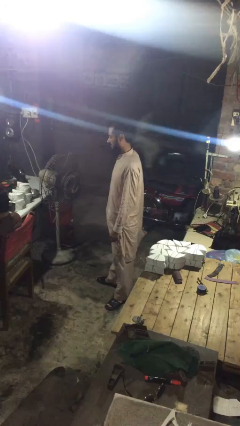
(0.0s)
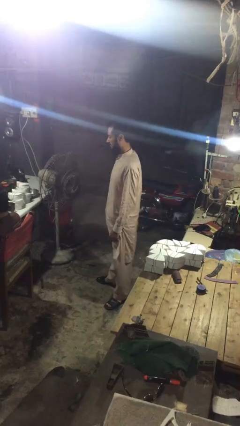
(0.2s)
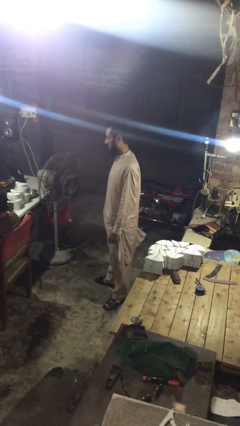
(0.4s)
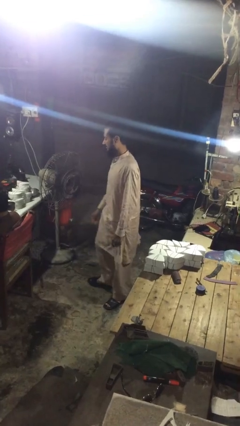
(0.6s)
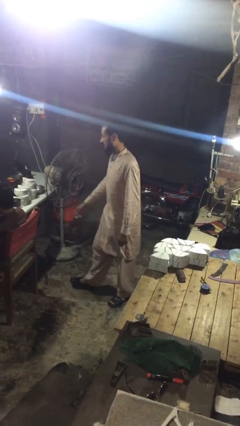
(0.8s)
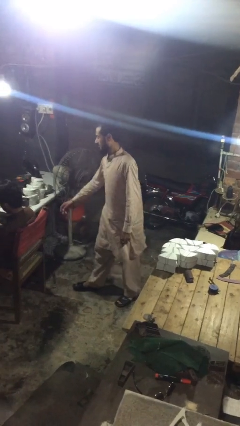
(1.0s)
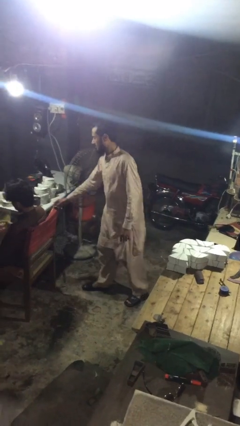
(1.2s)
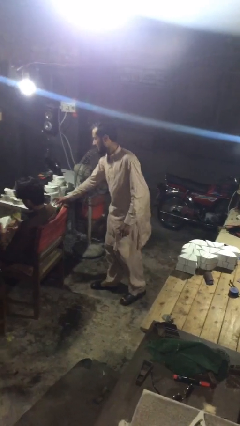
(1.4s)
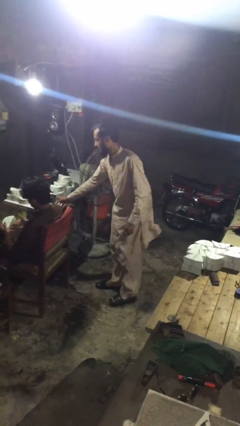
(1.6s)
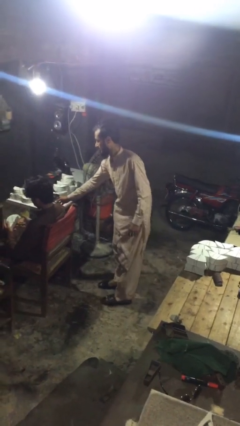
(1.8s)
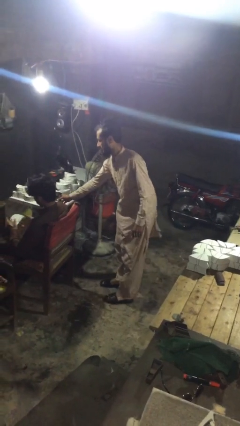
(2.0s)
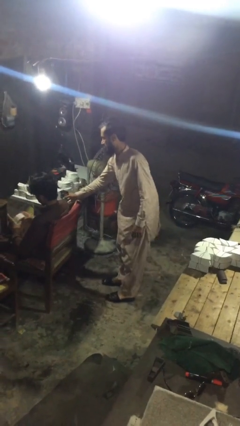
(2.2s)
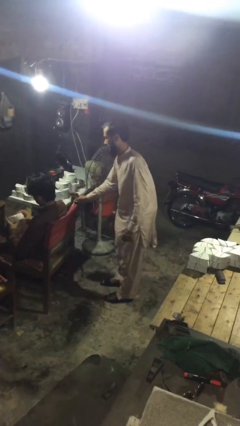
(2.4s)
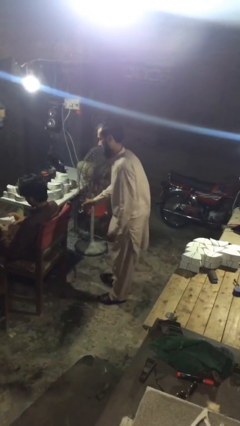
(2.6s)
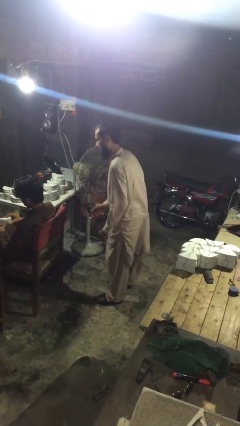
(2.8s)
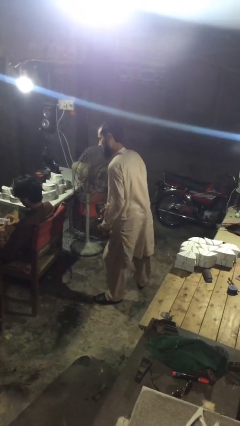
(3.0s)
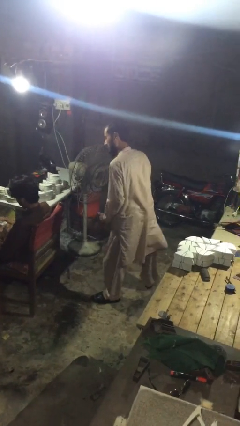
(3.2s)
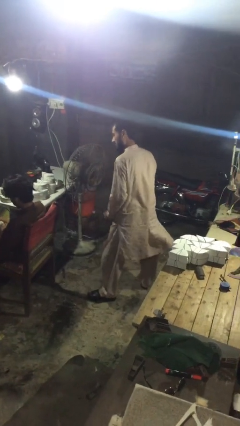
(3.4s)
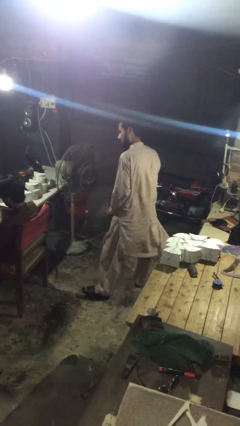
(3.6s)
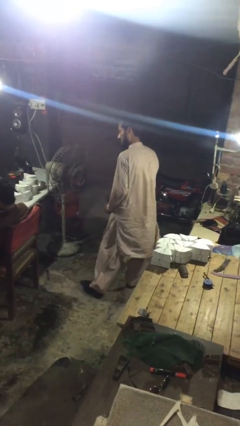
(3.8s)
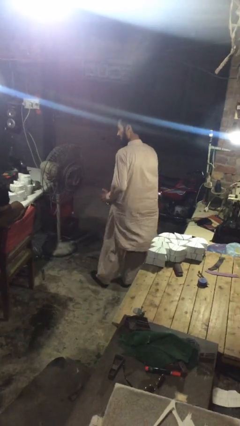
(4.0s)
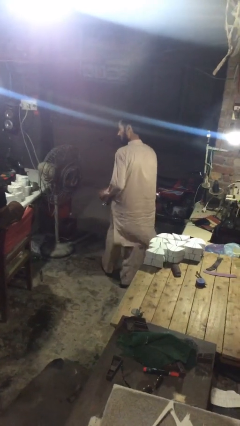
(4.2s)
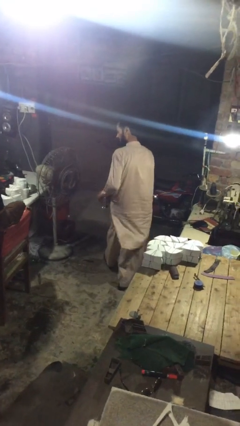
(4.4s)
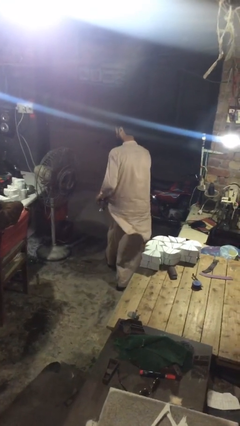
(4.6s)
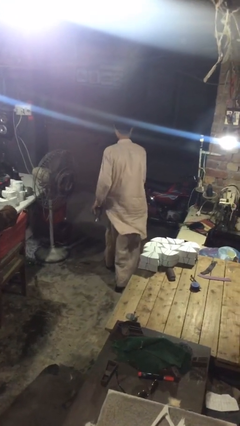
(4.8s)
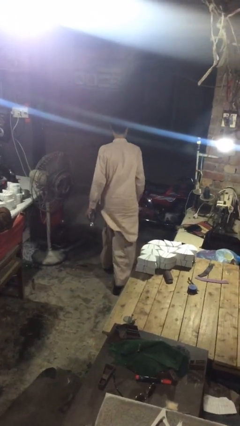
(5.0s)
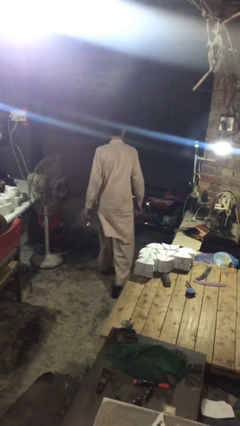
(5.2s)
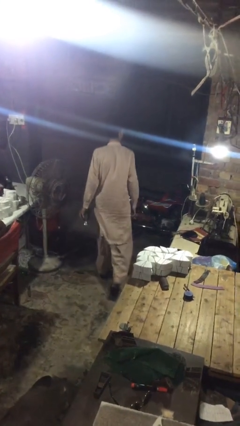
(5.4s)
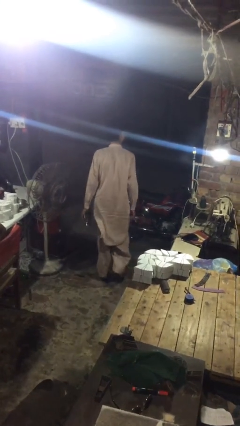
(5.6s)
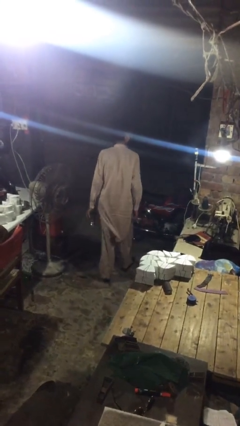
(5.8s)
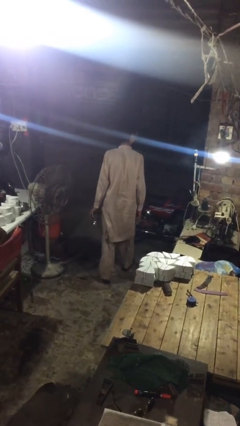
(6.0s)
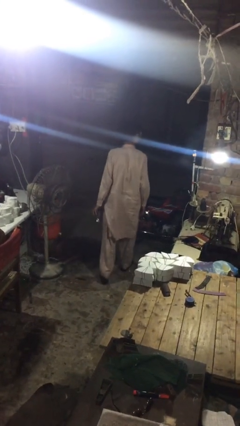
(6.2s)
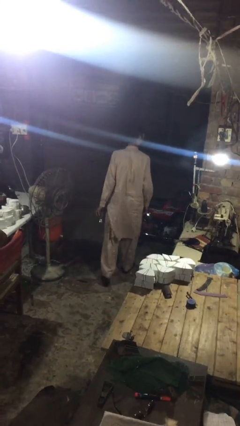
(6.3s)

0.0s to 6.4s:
person steals object from person

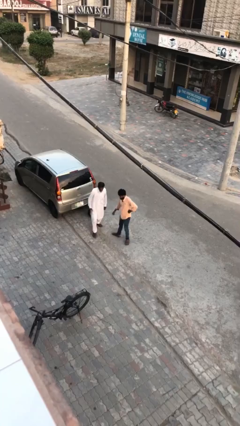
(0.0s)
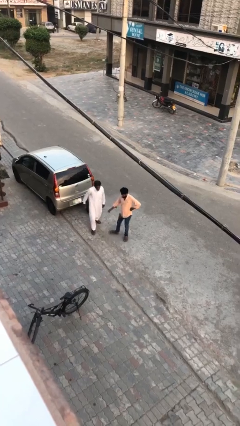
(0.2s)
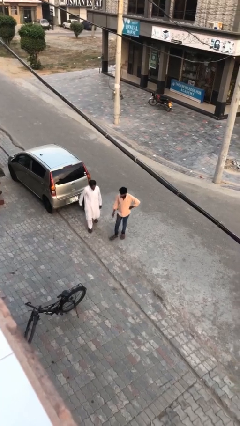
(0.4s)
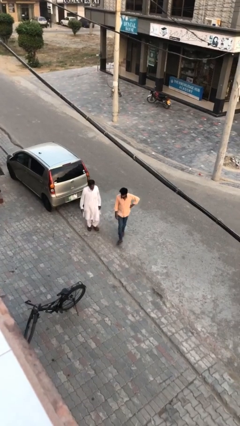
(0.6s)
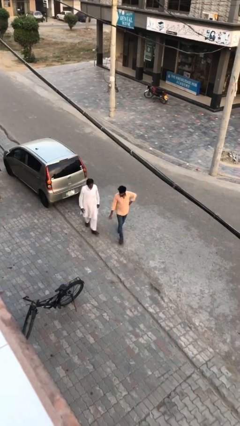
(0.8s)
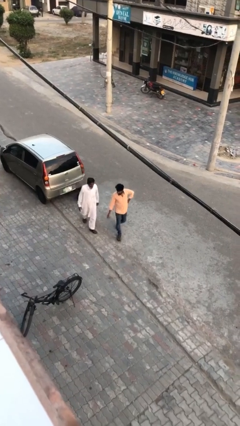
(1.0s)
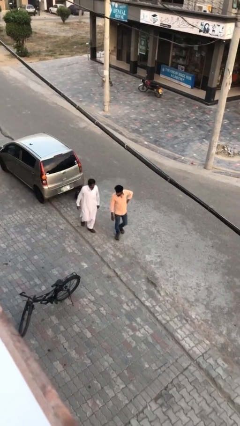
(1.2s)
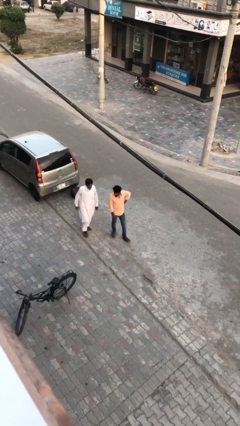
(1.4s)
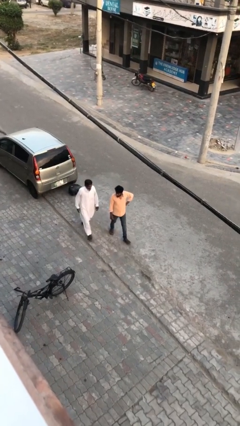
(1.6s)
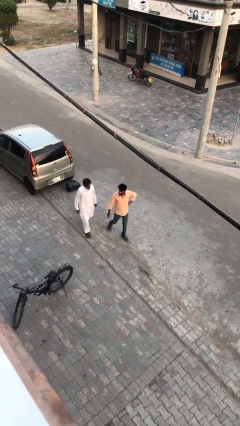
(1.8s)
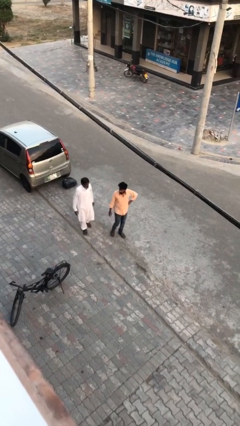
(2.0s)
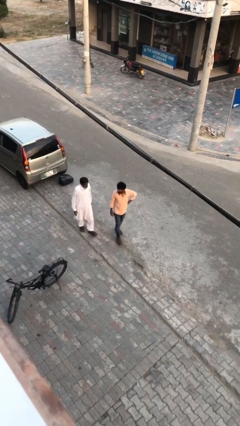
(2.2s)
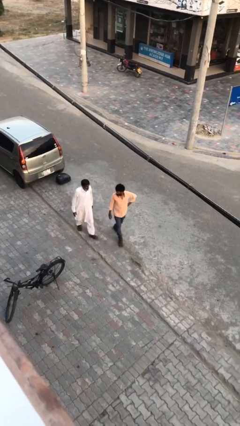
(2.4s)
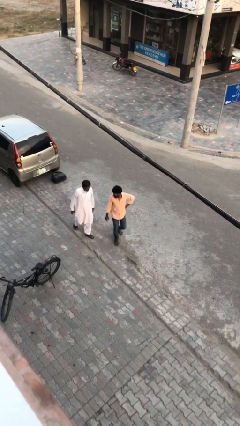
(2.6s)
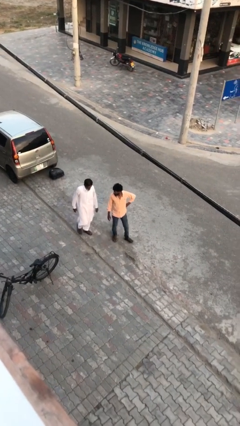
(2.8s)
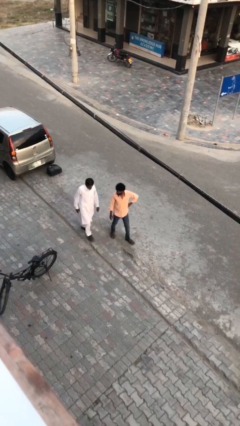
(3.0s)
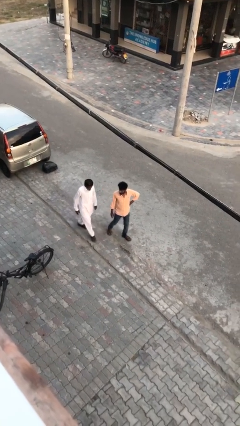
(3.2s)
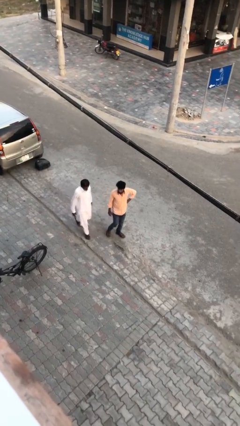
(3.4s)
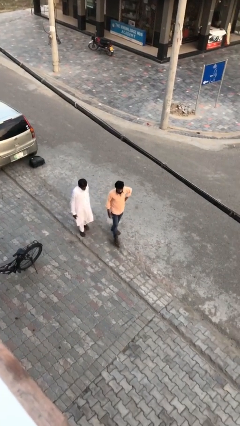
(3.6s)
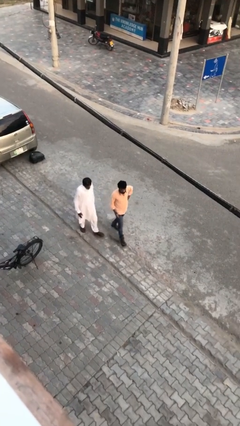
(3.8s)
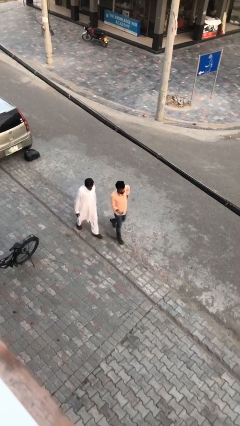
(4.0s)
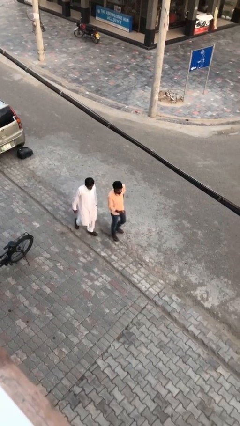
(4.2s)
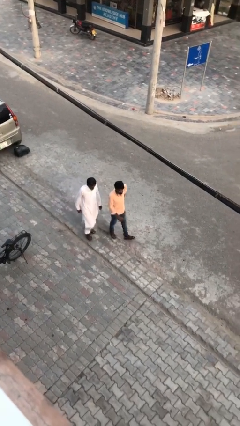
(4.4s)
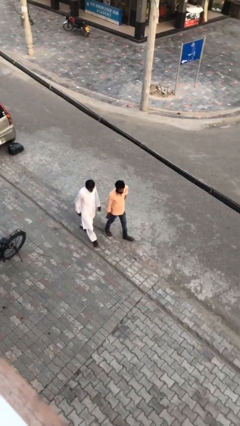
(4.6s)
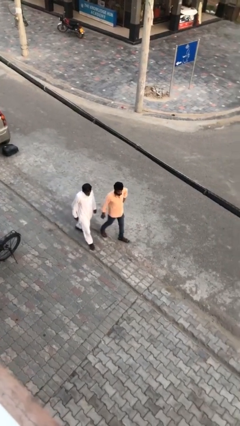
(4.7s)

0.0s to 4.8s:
person talks to person

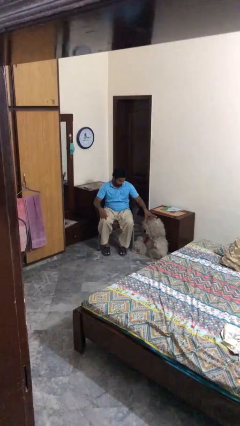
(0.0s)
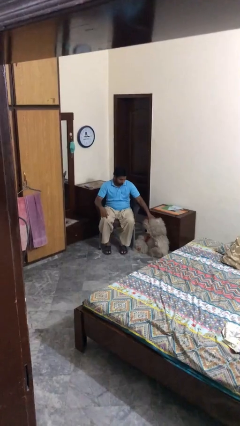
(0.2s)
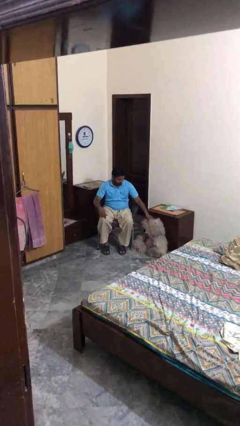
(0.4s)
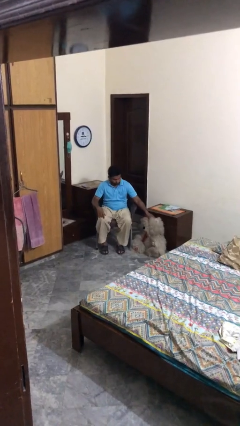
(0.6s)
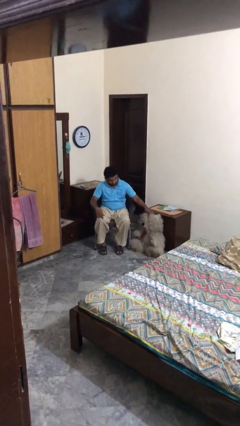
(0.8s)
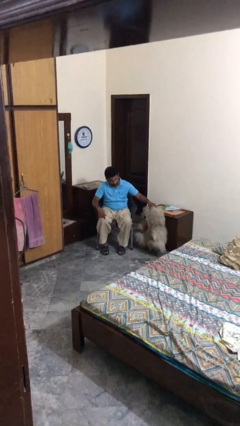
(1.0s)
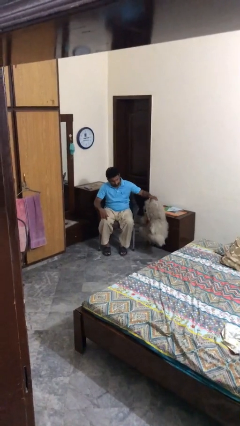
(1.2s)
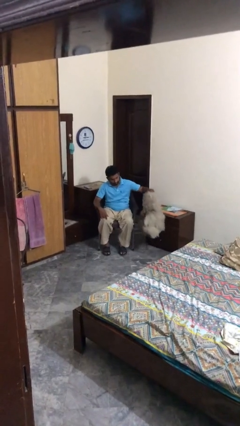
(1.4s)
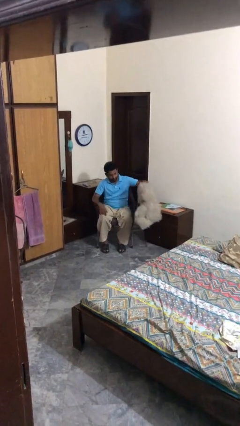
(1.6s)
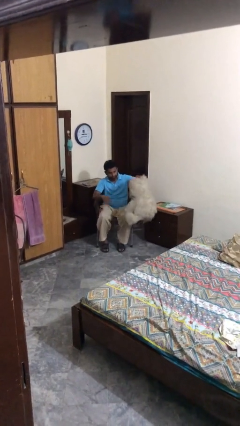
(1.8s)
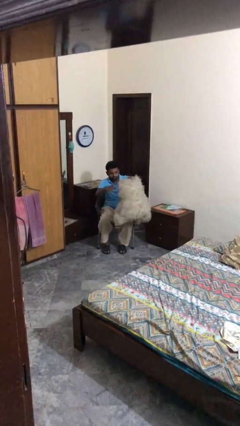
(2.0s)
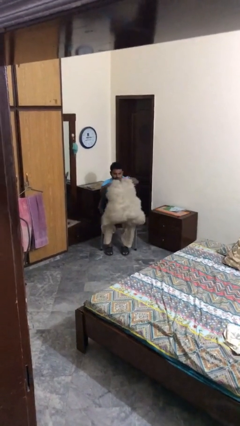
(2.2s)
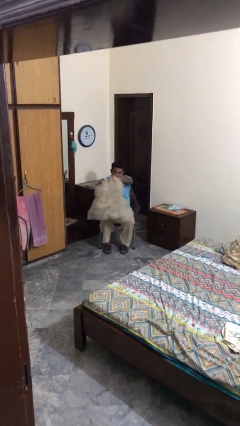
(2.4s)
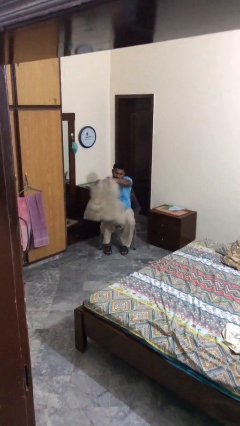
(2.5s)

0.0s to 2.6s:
person picks up object from floor

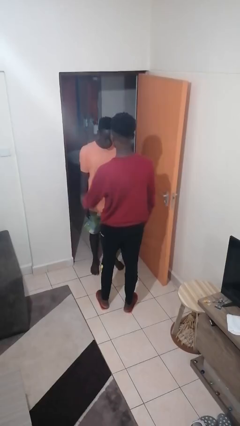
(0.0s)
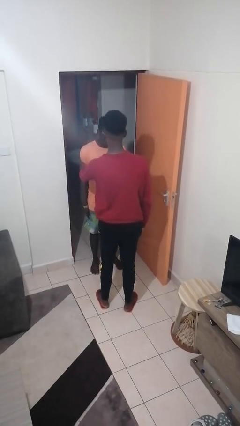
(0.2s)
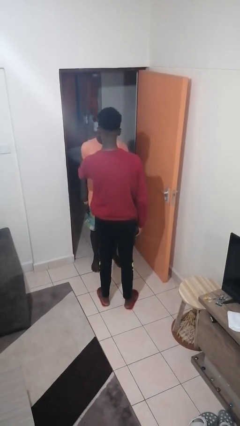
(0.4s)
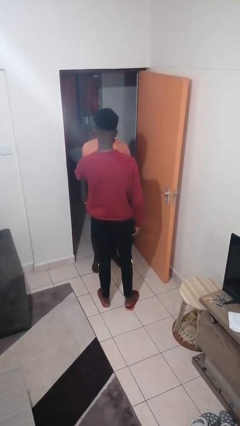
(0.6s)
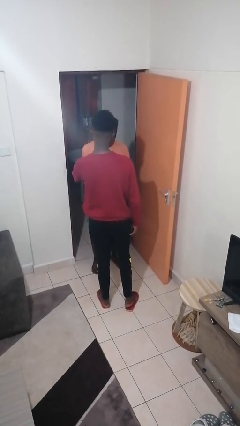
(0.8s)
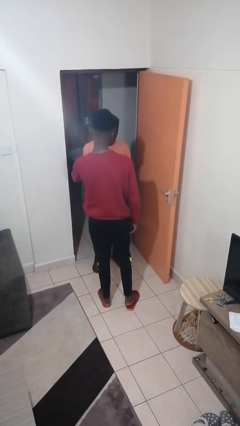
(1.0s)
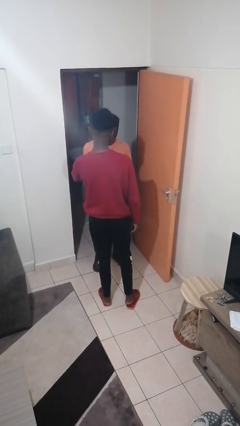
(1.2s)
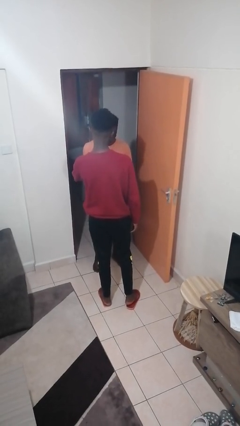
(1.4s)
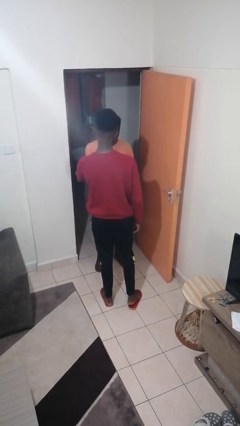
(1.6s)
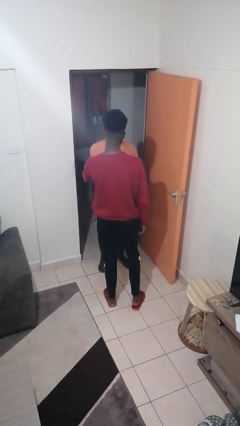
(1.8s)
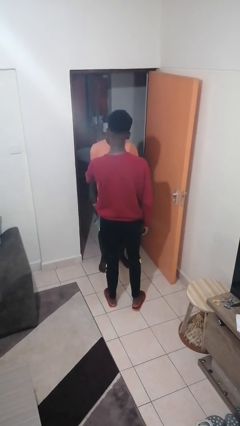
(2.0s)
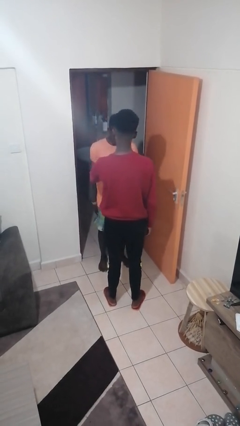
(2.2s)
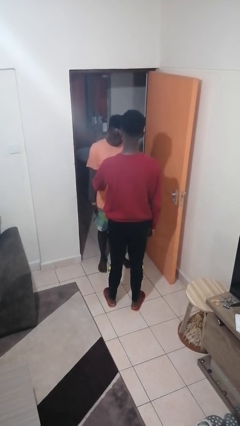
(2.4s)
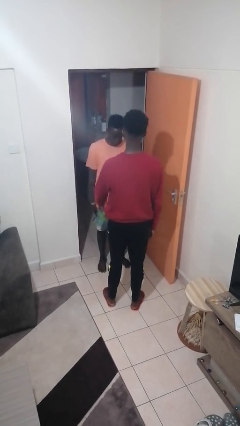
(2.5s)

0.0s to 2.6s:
person grabs person by bicep

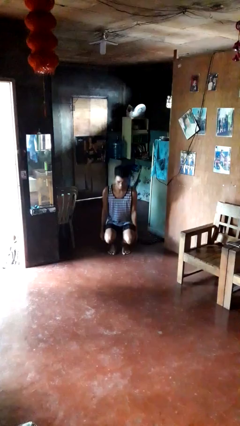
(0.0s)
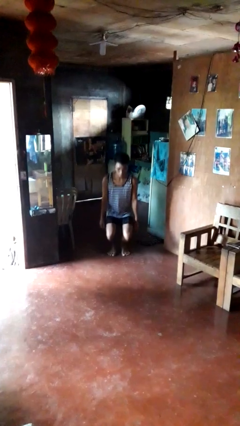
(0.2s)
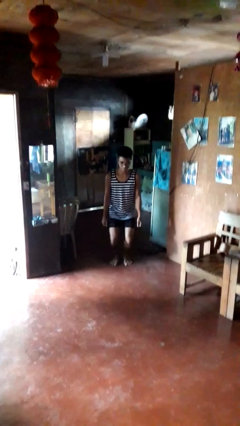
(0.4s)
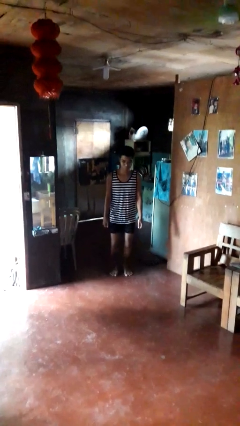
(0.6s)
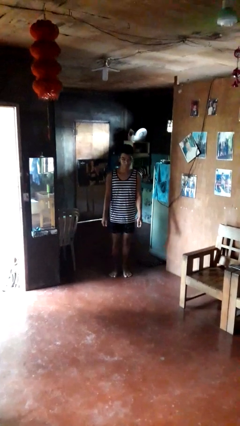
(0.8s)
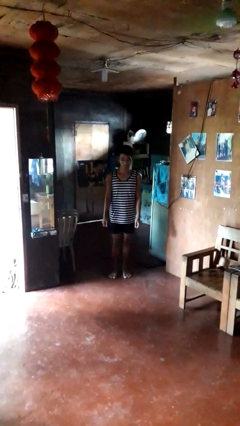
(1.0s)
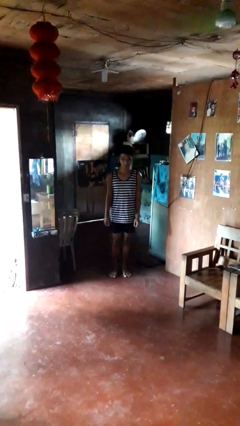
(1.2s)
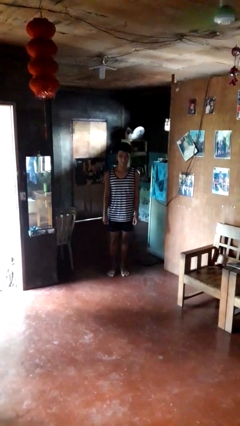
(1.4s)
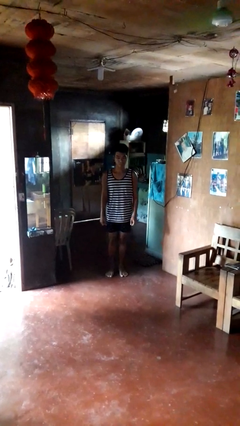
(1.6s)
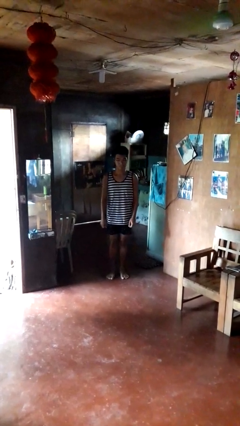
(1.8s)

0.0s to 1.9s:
person stands up
